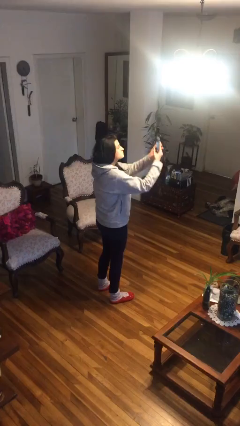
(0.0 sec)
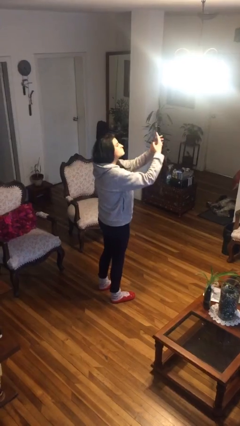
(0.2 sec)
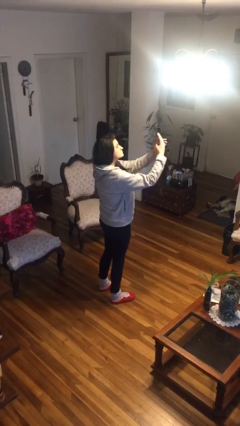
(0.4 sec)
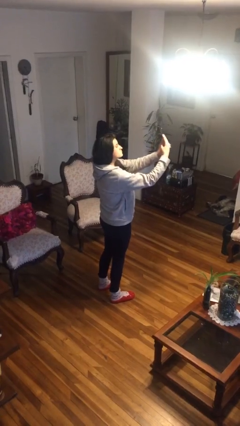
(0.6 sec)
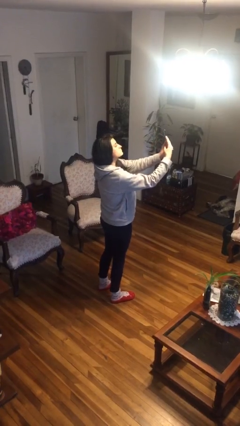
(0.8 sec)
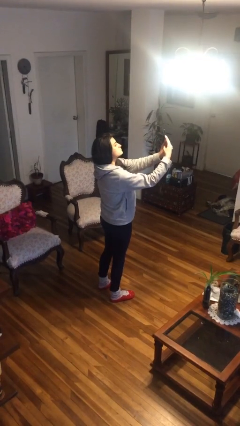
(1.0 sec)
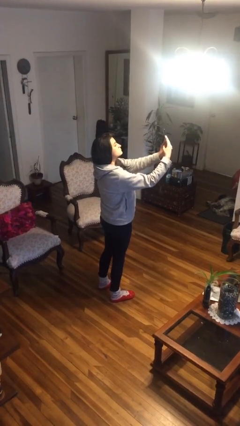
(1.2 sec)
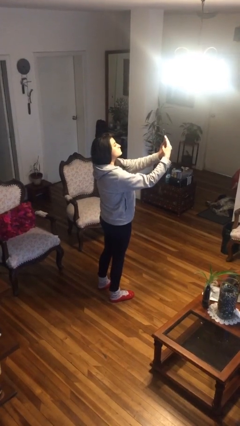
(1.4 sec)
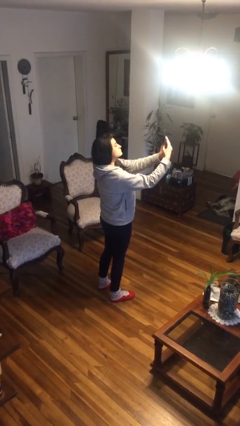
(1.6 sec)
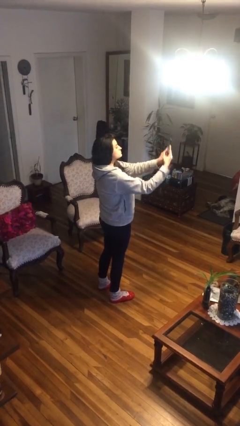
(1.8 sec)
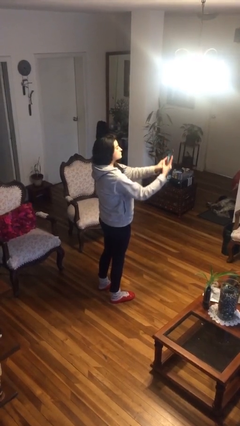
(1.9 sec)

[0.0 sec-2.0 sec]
person takes selfie

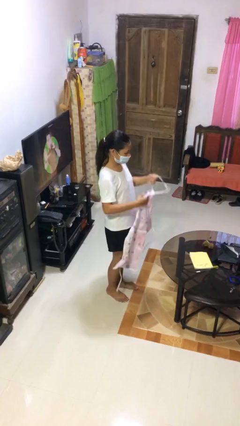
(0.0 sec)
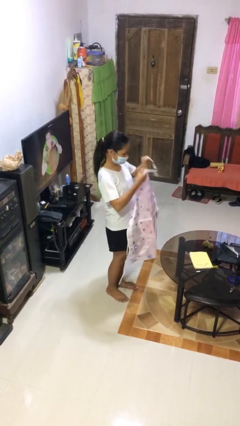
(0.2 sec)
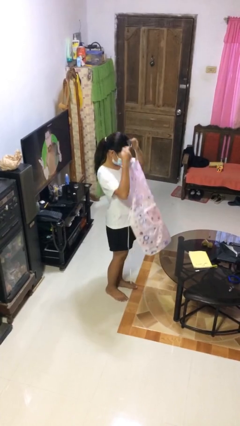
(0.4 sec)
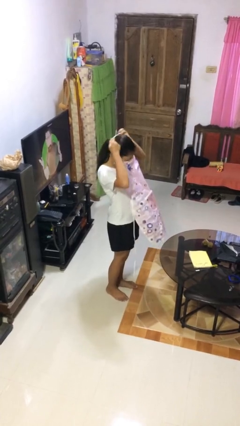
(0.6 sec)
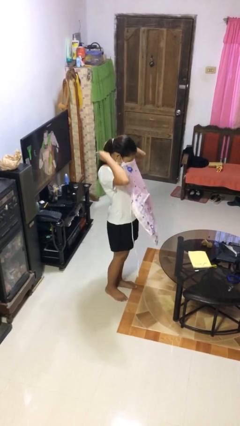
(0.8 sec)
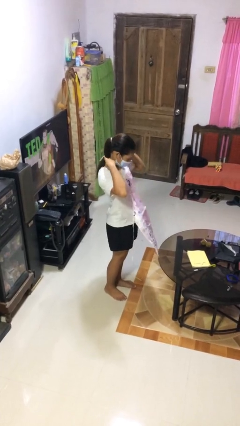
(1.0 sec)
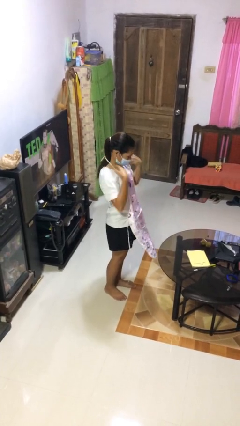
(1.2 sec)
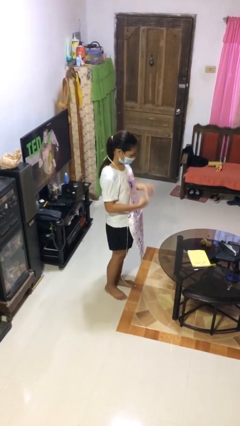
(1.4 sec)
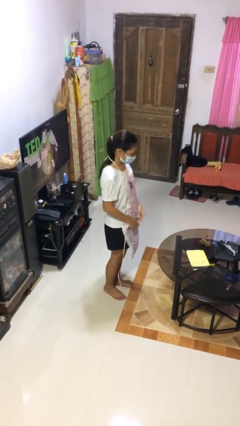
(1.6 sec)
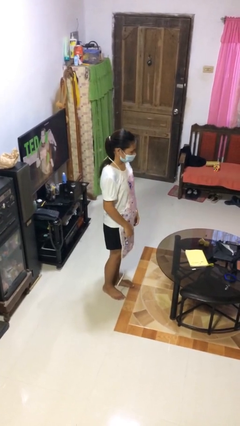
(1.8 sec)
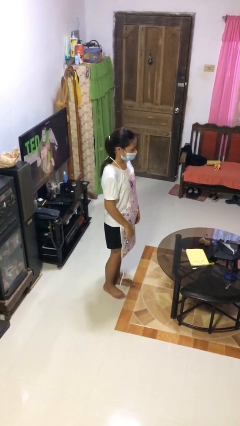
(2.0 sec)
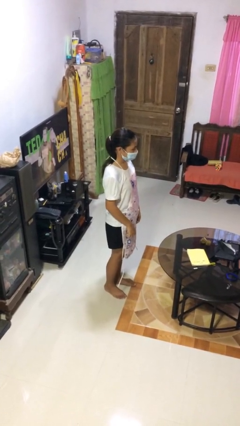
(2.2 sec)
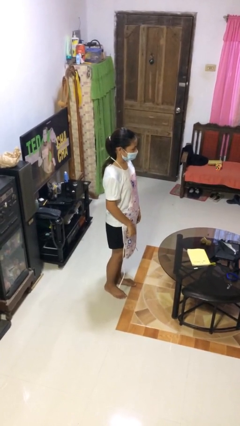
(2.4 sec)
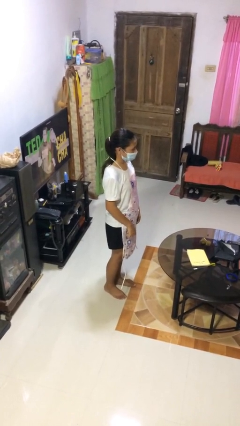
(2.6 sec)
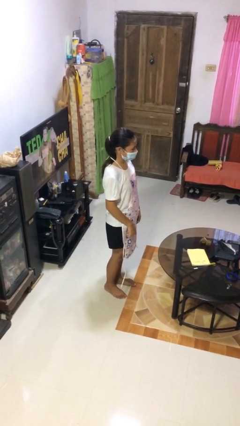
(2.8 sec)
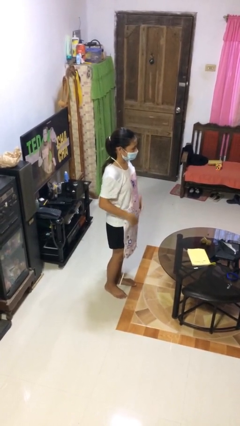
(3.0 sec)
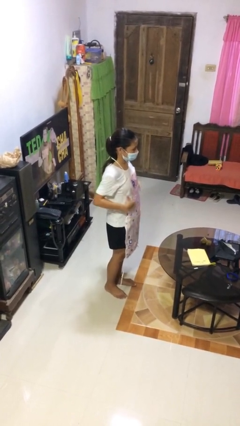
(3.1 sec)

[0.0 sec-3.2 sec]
person puts on apron

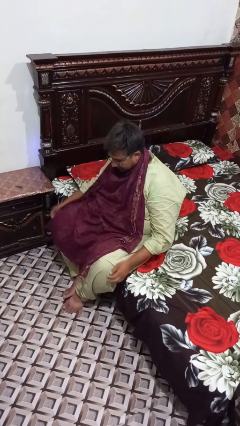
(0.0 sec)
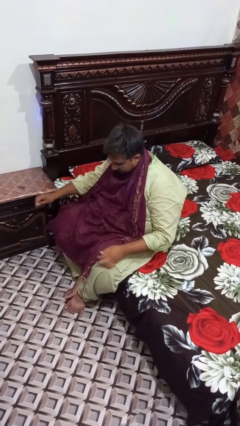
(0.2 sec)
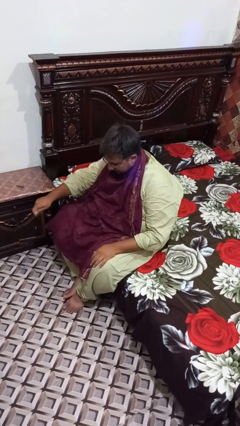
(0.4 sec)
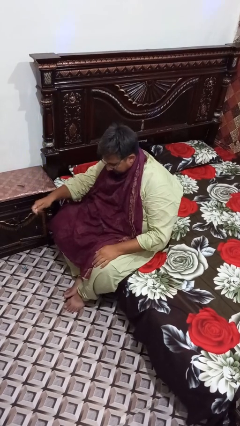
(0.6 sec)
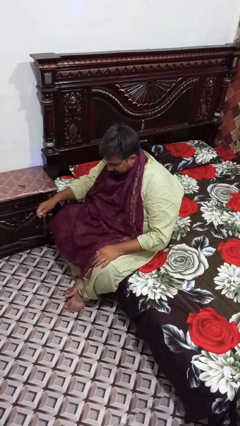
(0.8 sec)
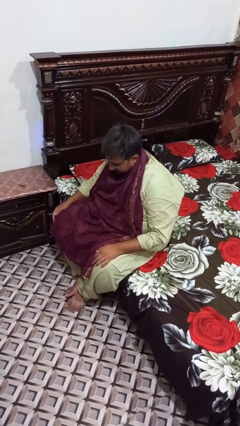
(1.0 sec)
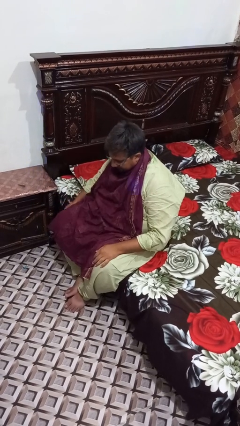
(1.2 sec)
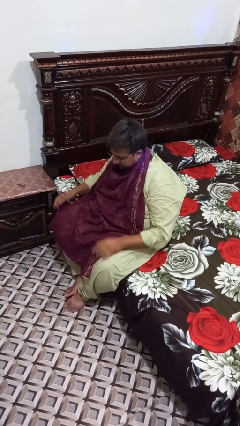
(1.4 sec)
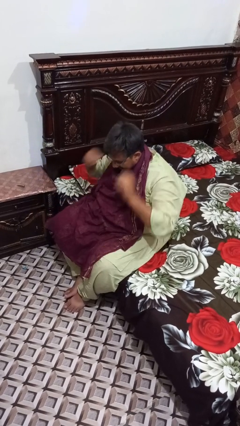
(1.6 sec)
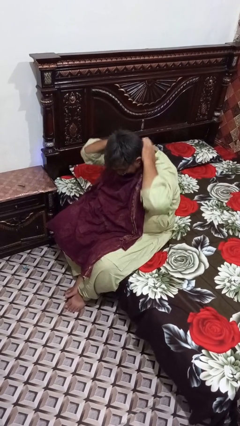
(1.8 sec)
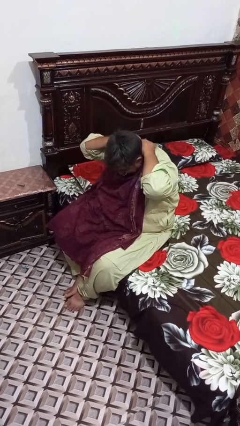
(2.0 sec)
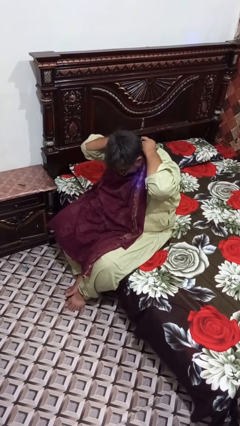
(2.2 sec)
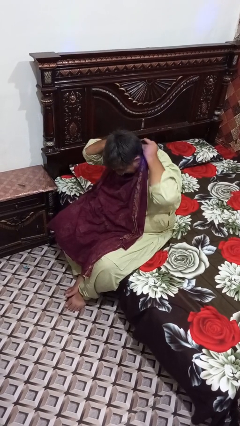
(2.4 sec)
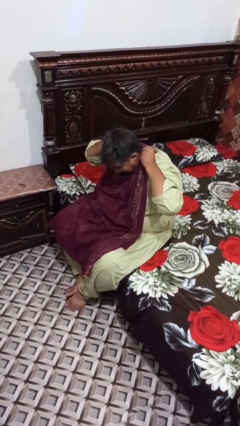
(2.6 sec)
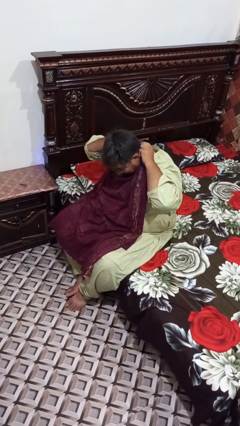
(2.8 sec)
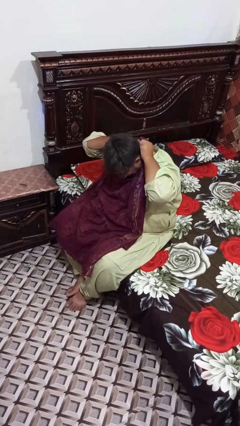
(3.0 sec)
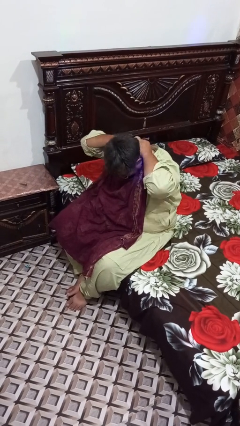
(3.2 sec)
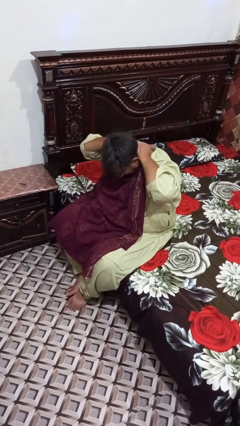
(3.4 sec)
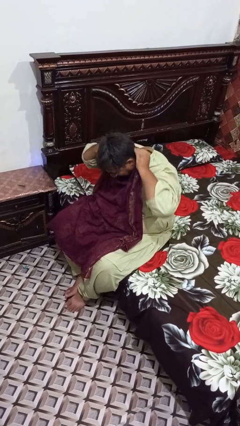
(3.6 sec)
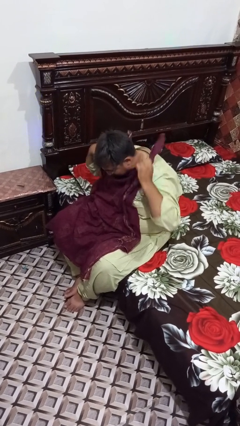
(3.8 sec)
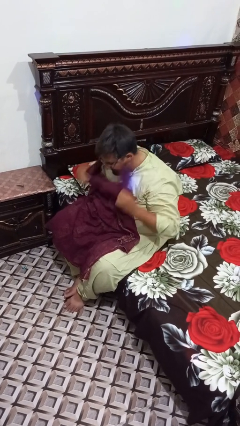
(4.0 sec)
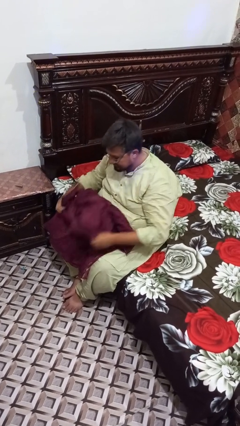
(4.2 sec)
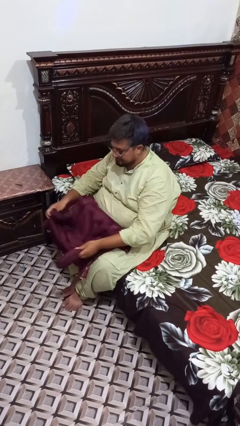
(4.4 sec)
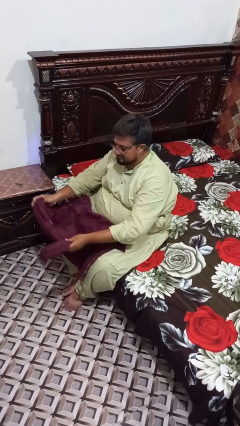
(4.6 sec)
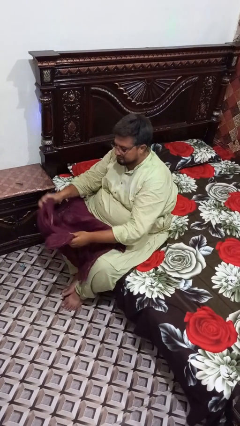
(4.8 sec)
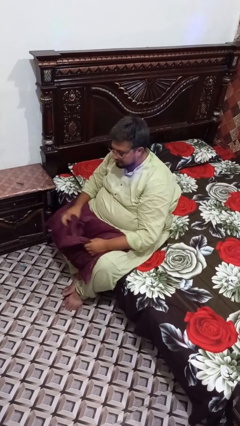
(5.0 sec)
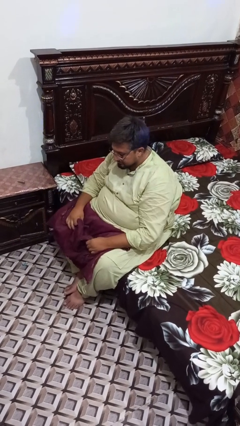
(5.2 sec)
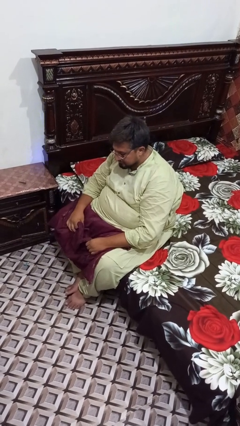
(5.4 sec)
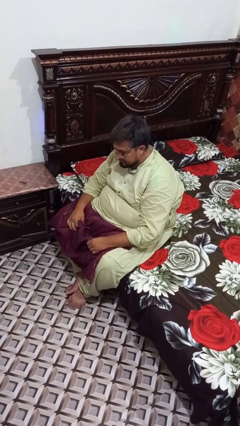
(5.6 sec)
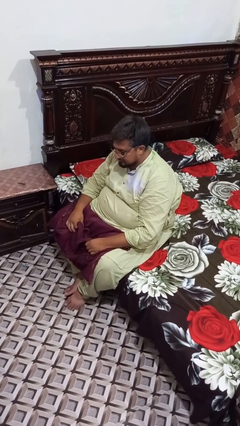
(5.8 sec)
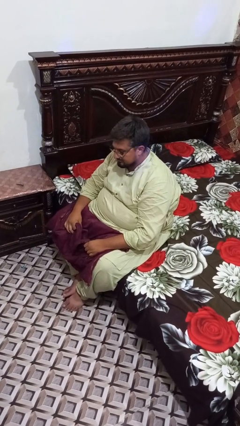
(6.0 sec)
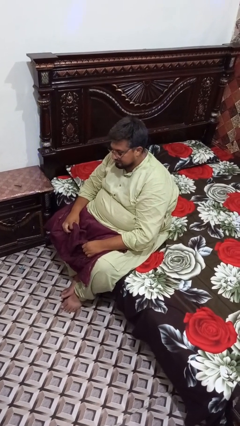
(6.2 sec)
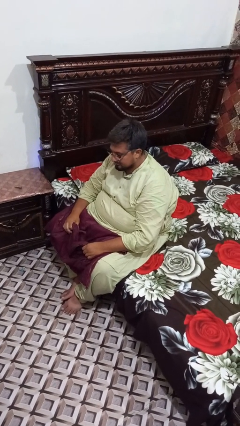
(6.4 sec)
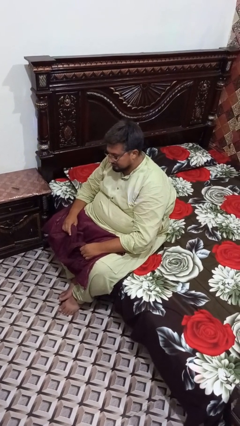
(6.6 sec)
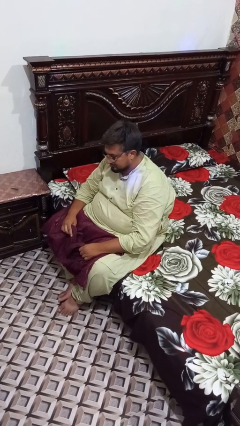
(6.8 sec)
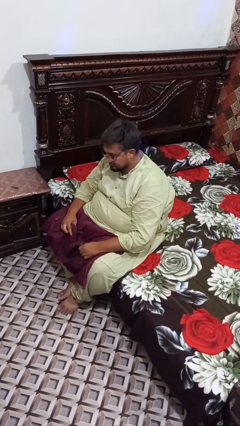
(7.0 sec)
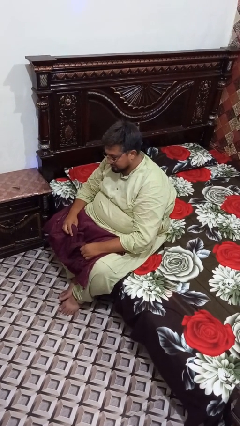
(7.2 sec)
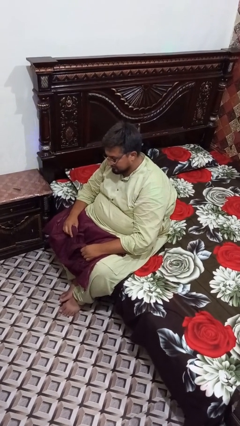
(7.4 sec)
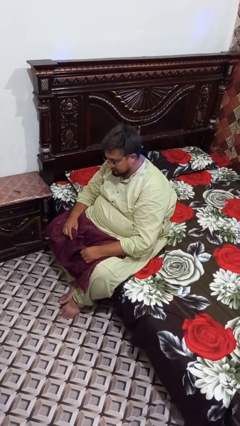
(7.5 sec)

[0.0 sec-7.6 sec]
person takes off apron

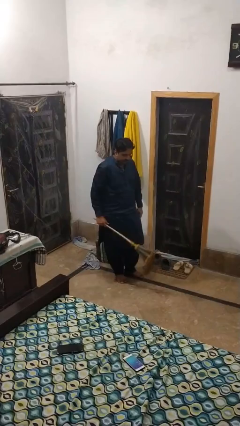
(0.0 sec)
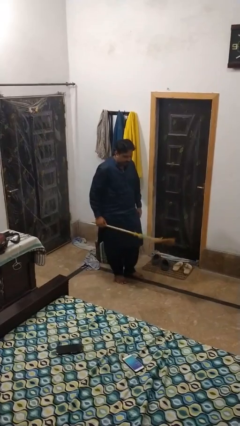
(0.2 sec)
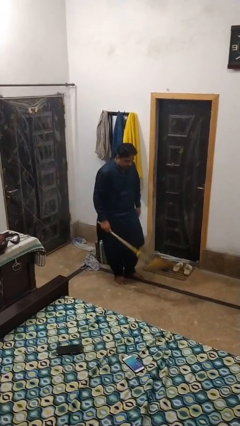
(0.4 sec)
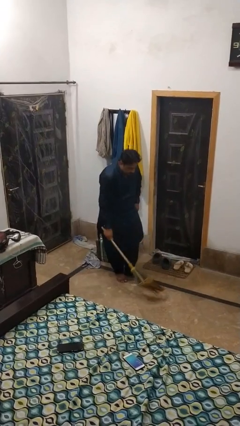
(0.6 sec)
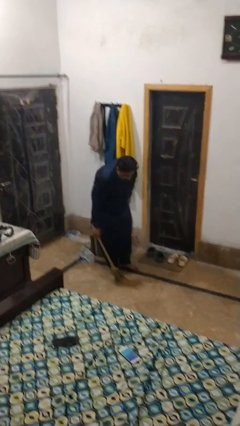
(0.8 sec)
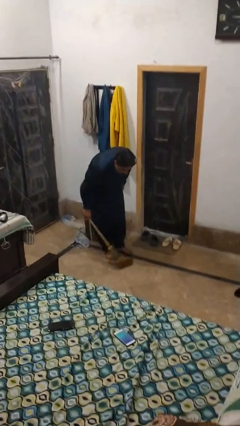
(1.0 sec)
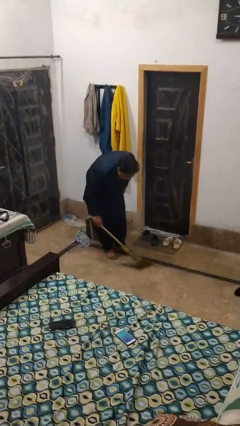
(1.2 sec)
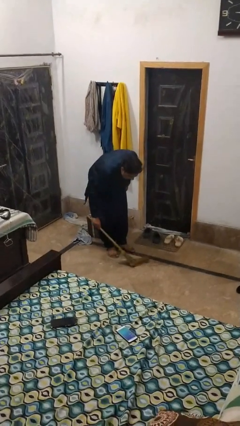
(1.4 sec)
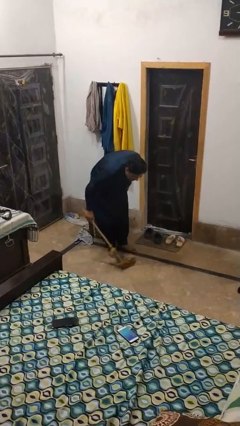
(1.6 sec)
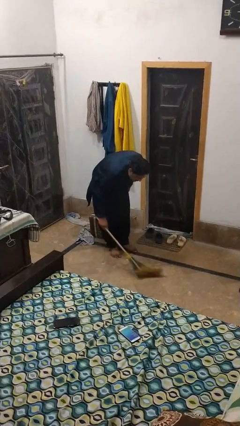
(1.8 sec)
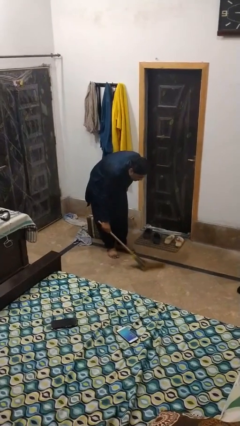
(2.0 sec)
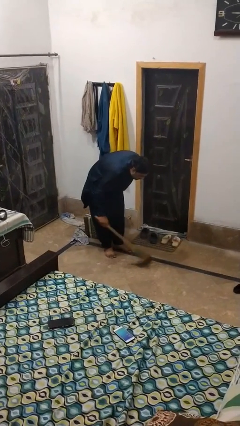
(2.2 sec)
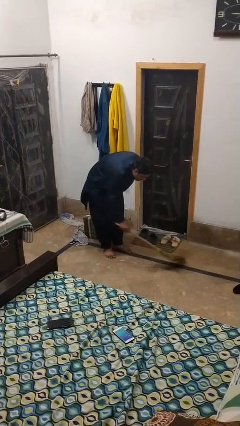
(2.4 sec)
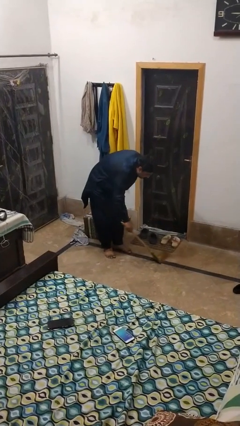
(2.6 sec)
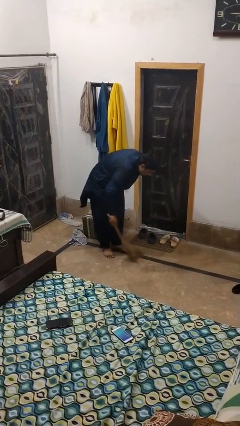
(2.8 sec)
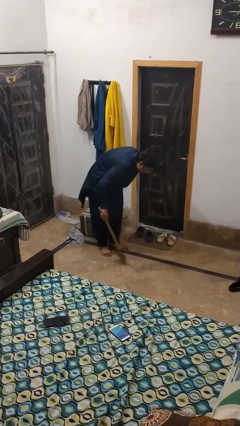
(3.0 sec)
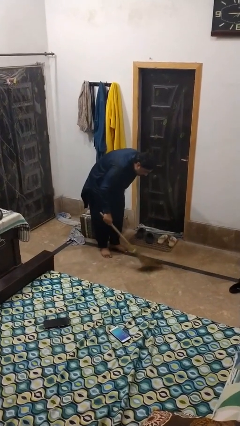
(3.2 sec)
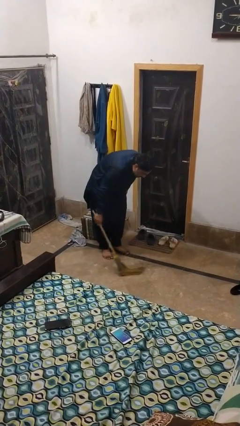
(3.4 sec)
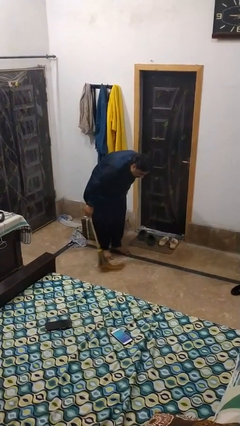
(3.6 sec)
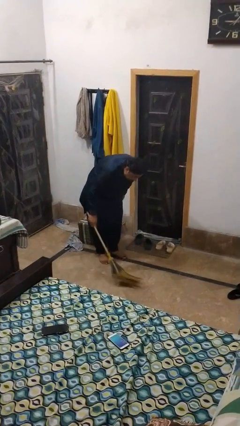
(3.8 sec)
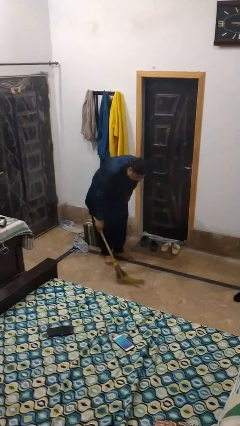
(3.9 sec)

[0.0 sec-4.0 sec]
person sweeps floor

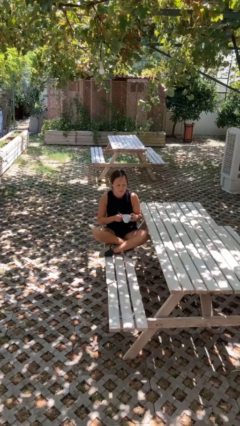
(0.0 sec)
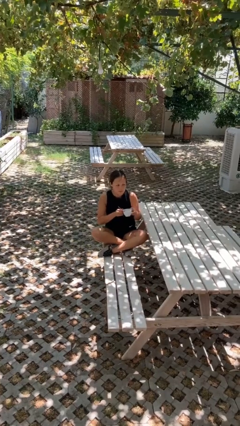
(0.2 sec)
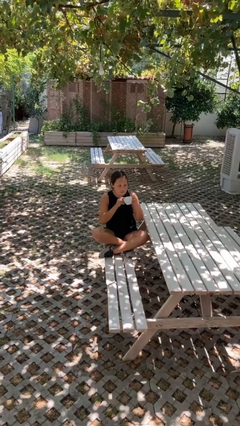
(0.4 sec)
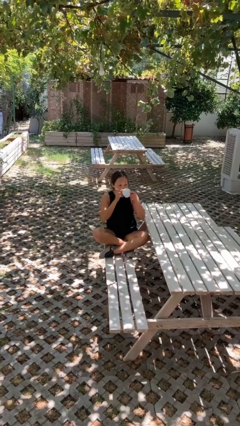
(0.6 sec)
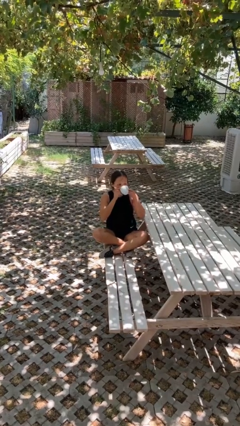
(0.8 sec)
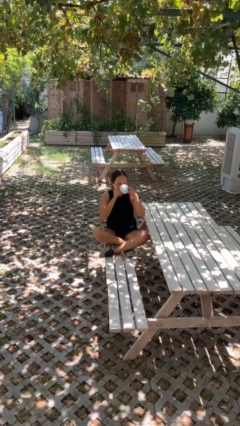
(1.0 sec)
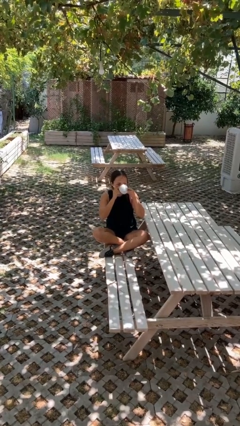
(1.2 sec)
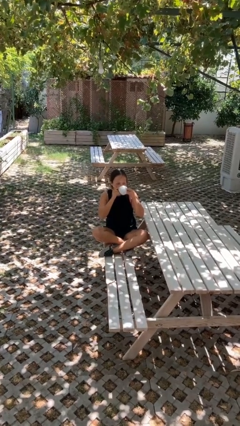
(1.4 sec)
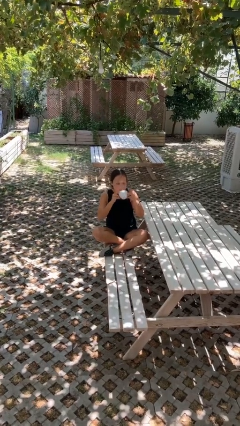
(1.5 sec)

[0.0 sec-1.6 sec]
person drinks from mug
